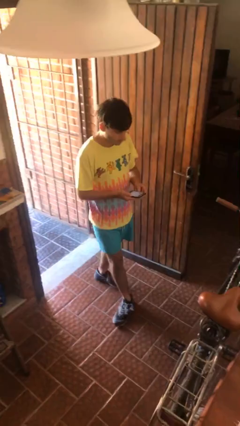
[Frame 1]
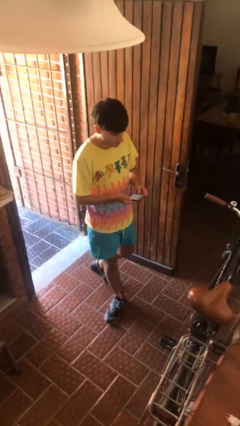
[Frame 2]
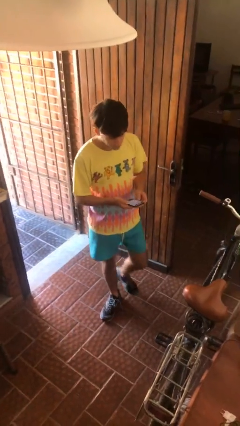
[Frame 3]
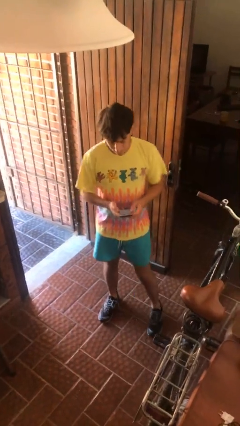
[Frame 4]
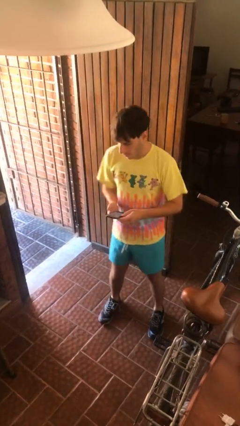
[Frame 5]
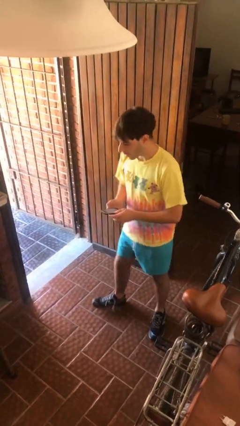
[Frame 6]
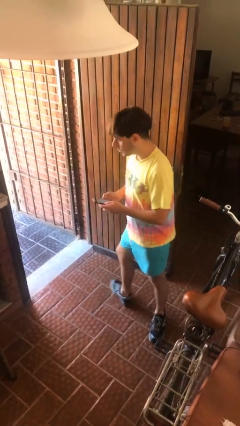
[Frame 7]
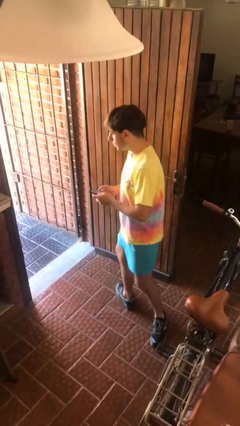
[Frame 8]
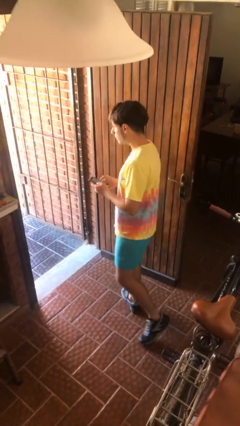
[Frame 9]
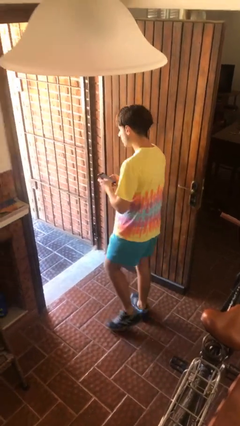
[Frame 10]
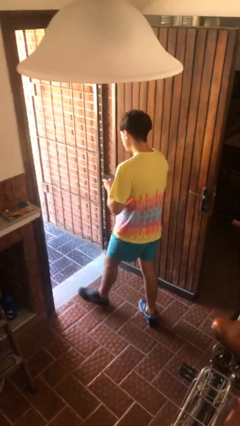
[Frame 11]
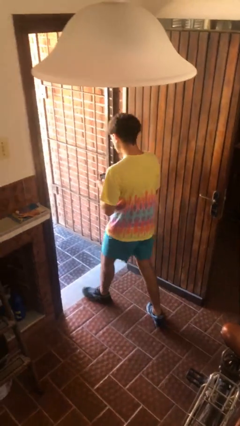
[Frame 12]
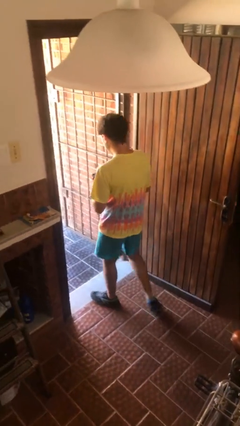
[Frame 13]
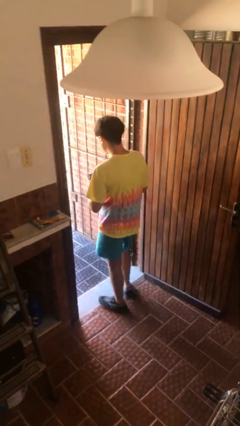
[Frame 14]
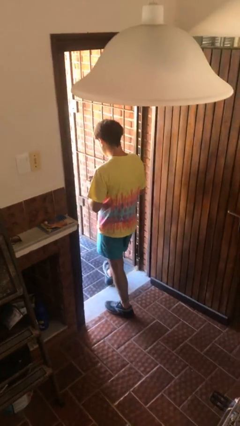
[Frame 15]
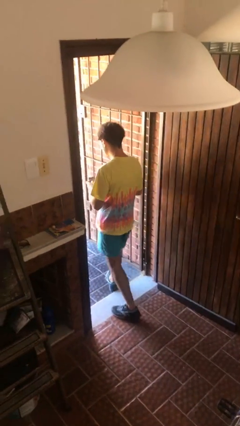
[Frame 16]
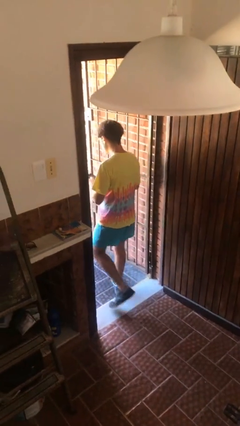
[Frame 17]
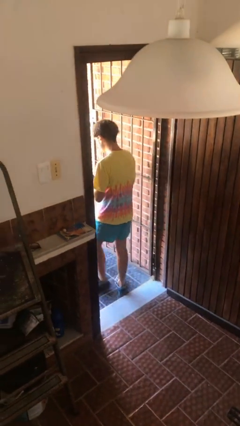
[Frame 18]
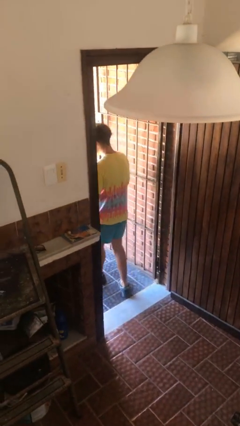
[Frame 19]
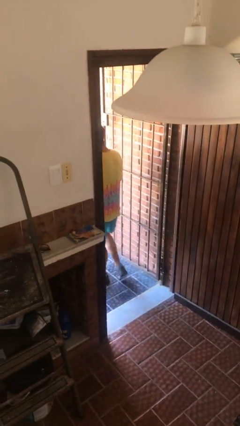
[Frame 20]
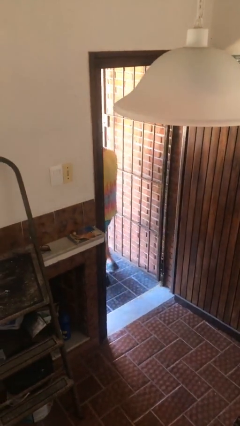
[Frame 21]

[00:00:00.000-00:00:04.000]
person exits scene through structure

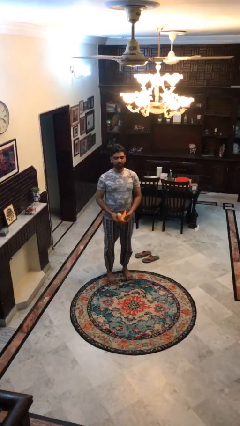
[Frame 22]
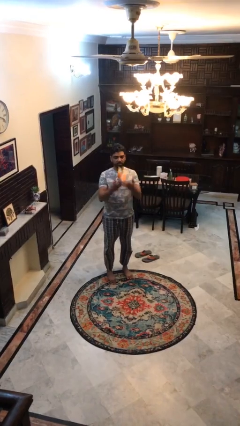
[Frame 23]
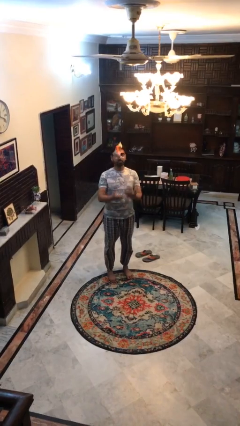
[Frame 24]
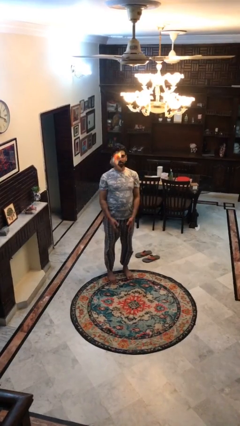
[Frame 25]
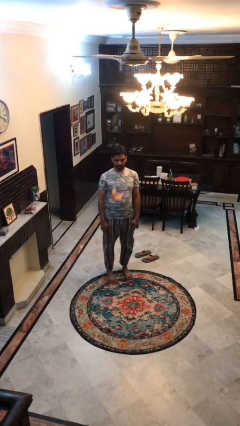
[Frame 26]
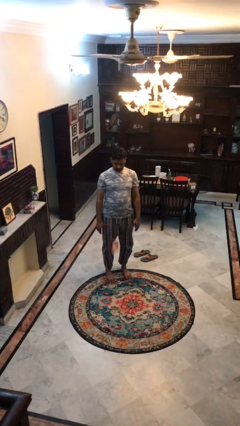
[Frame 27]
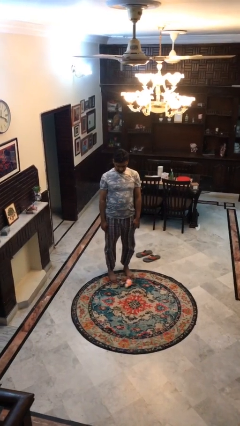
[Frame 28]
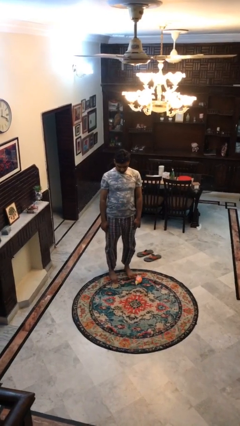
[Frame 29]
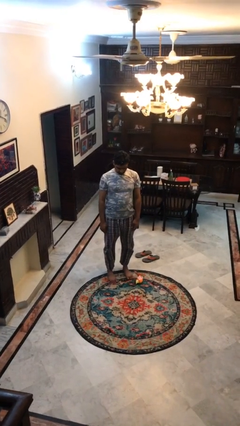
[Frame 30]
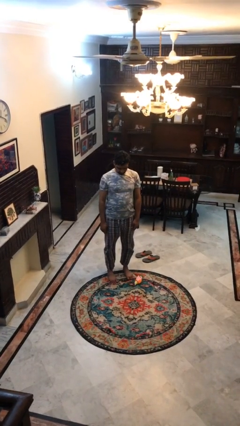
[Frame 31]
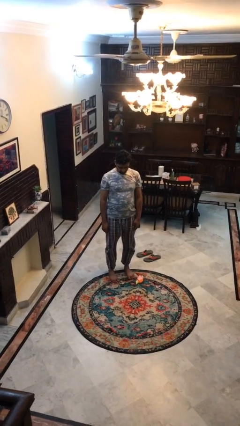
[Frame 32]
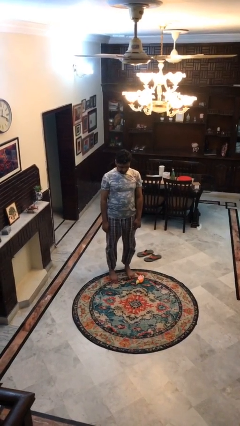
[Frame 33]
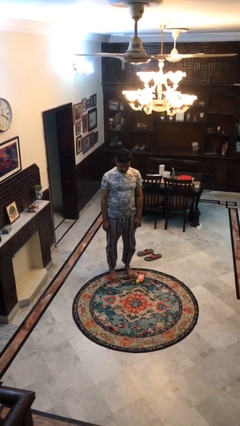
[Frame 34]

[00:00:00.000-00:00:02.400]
person throws object into air

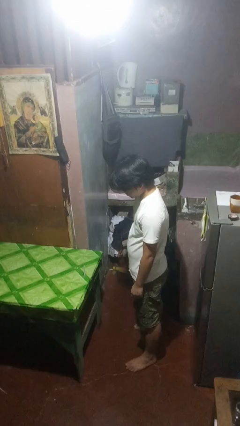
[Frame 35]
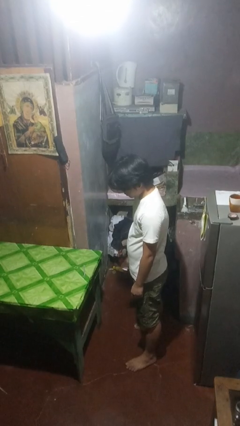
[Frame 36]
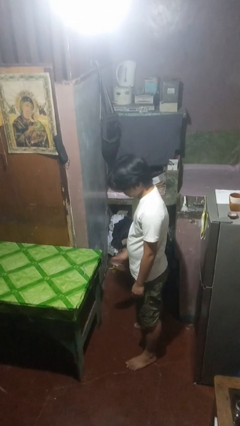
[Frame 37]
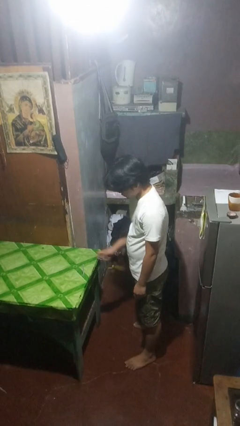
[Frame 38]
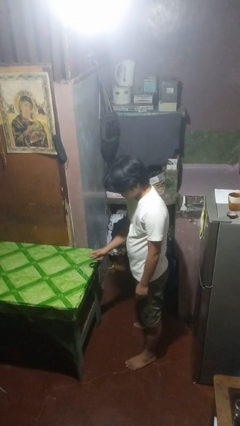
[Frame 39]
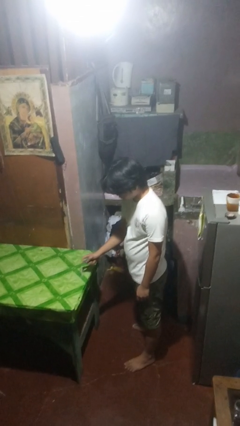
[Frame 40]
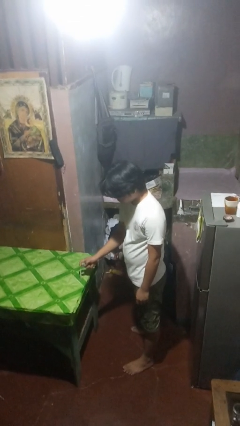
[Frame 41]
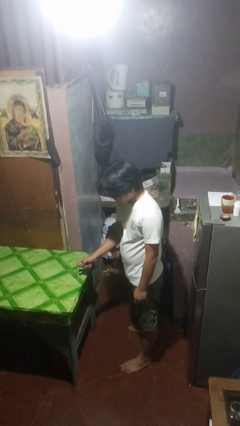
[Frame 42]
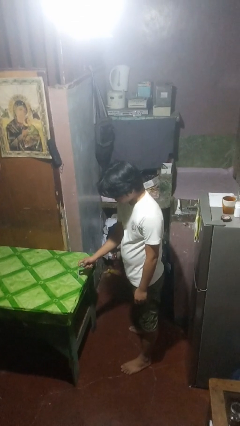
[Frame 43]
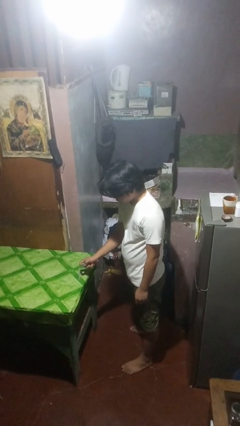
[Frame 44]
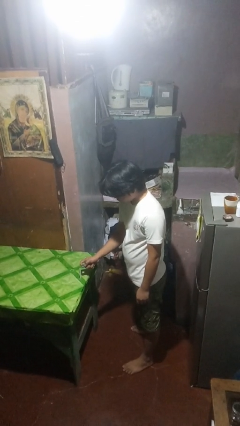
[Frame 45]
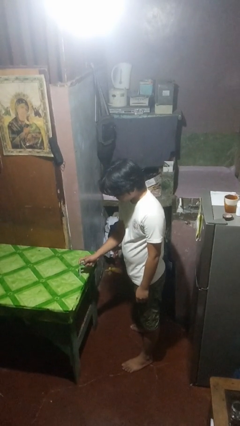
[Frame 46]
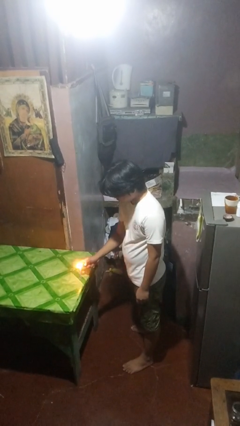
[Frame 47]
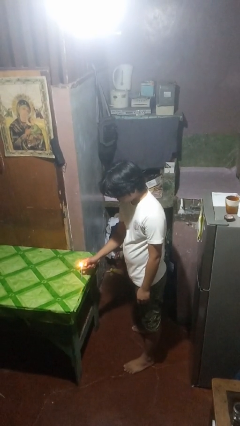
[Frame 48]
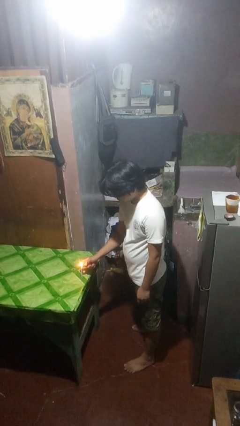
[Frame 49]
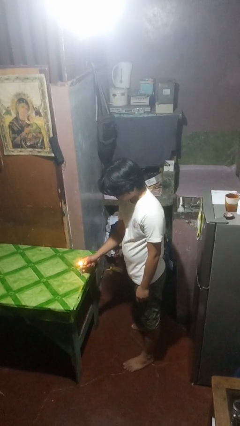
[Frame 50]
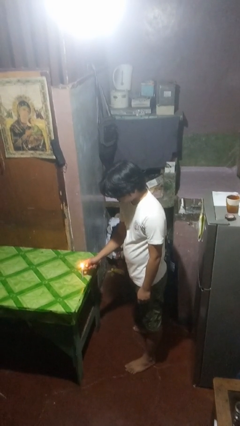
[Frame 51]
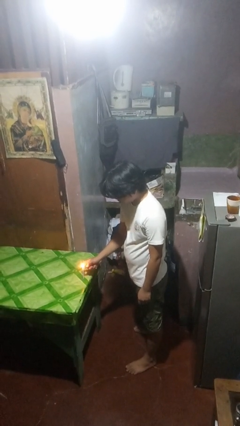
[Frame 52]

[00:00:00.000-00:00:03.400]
person lights candle

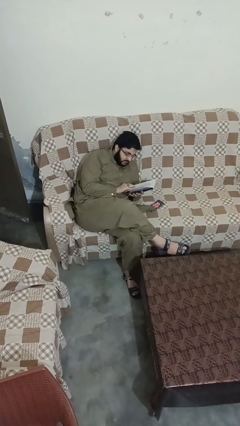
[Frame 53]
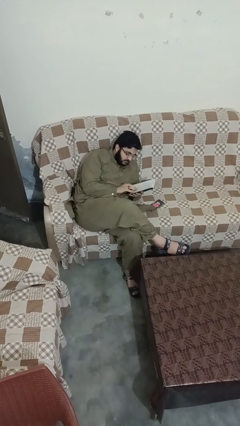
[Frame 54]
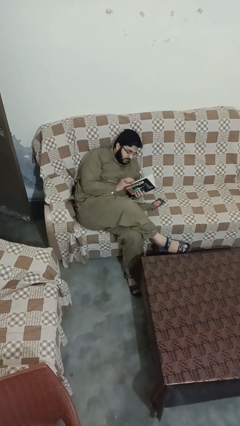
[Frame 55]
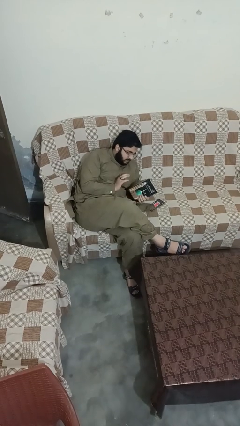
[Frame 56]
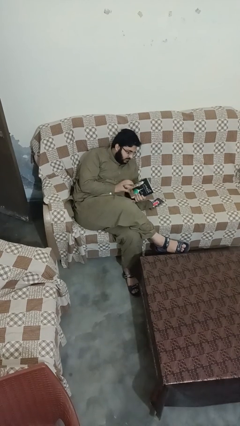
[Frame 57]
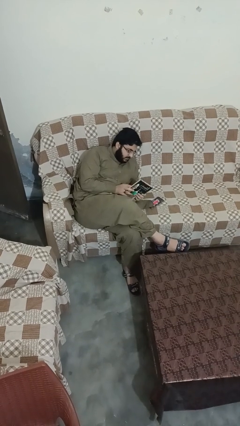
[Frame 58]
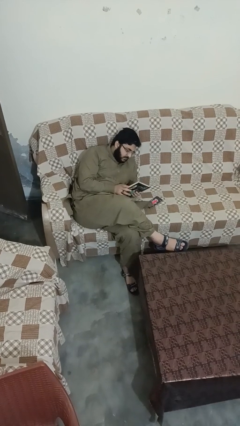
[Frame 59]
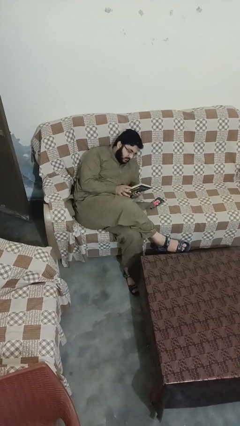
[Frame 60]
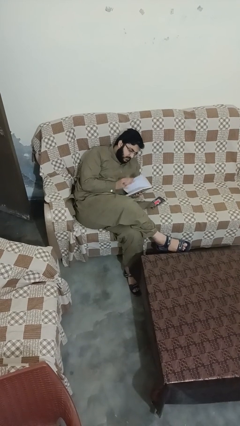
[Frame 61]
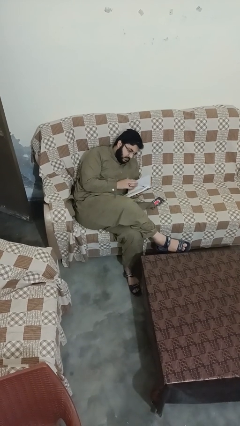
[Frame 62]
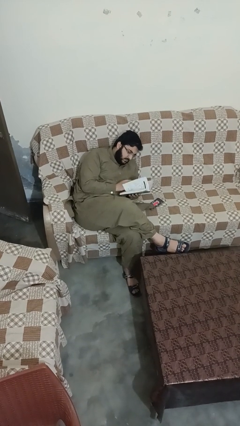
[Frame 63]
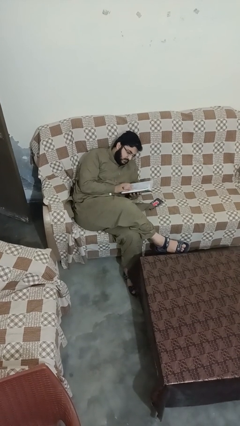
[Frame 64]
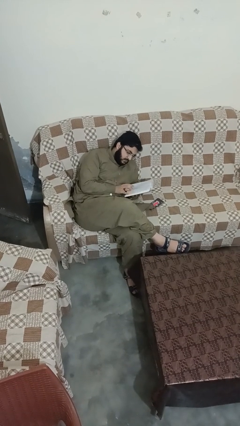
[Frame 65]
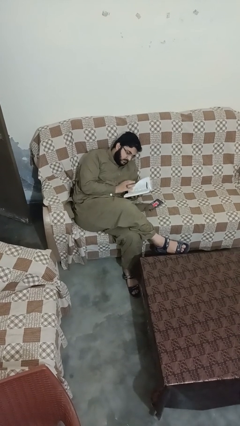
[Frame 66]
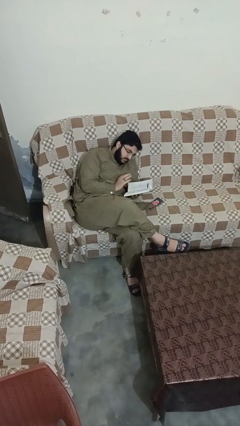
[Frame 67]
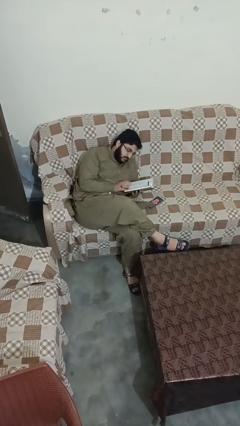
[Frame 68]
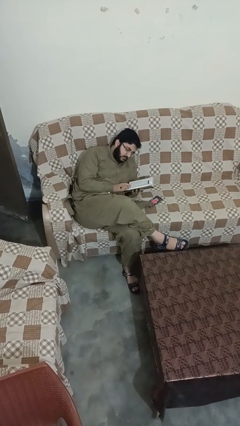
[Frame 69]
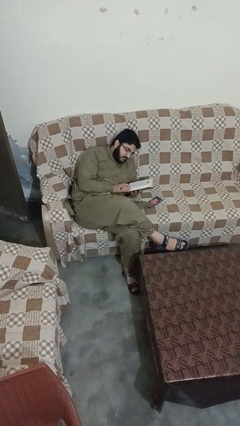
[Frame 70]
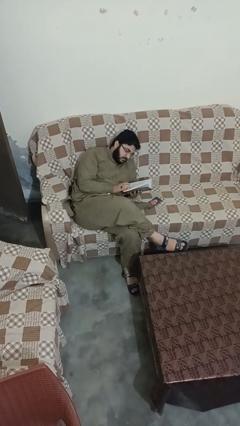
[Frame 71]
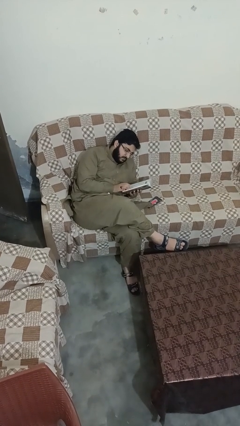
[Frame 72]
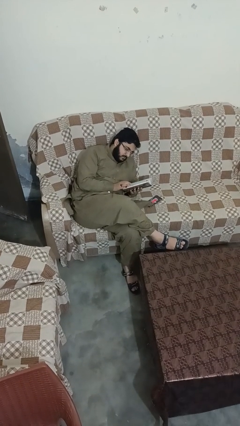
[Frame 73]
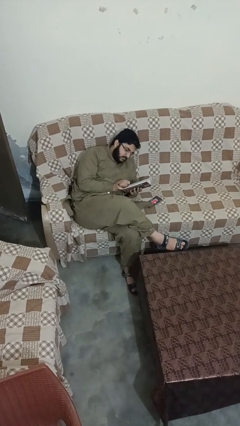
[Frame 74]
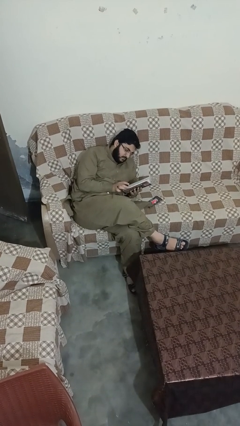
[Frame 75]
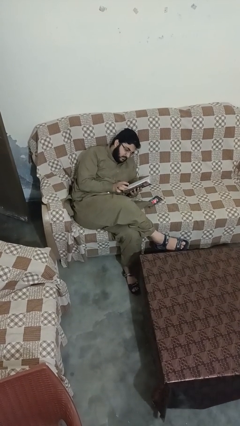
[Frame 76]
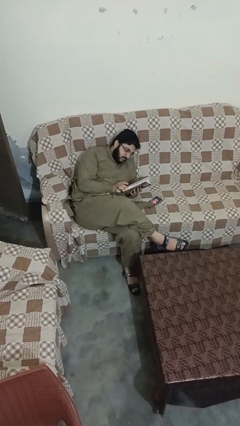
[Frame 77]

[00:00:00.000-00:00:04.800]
person reads book

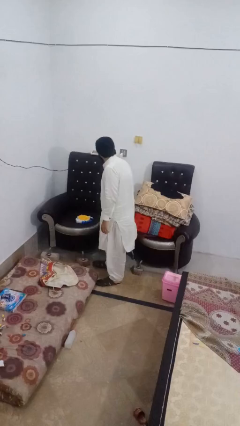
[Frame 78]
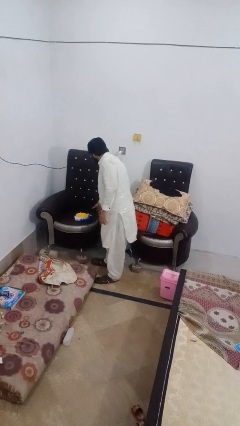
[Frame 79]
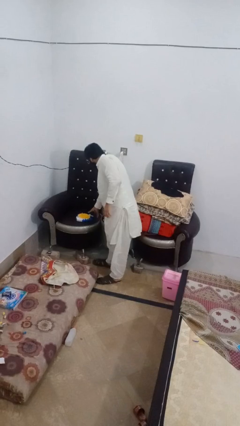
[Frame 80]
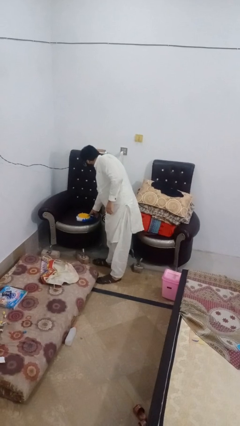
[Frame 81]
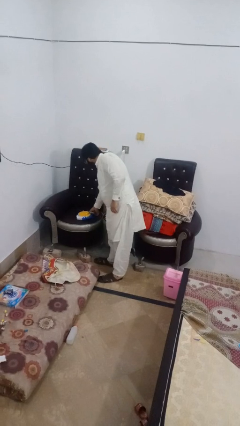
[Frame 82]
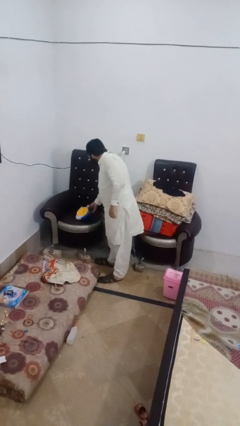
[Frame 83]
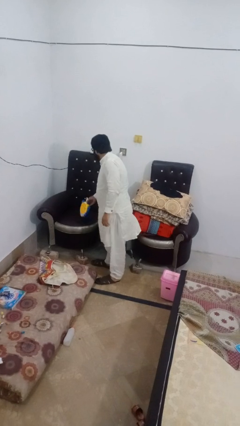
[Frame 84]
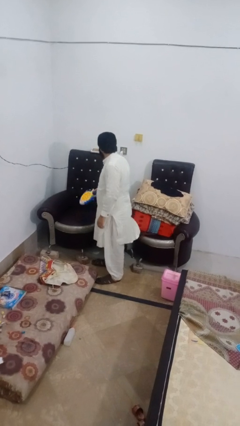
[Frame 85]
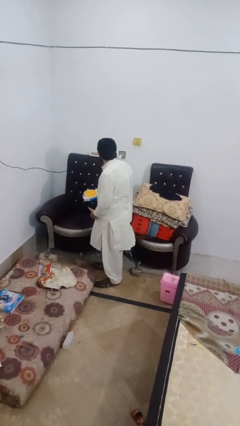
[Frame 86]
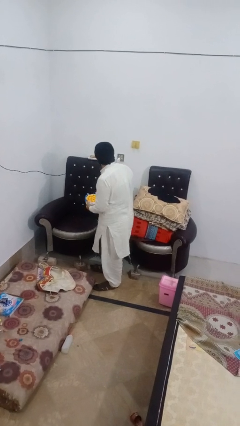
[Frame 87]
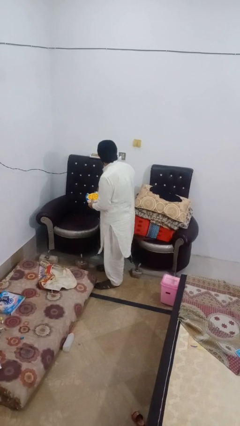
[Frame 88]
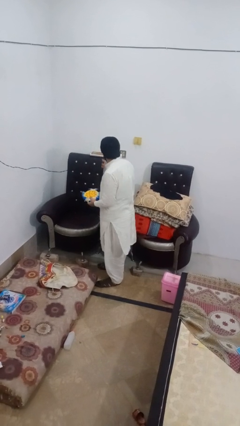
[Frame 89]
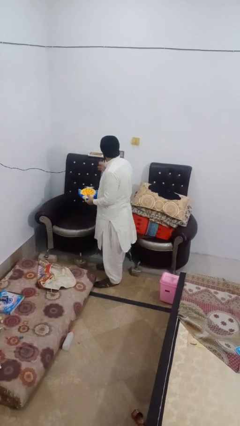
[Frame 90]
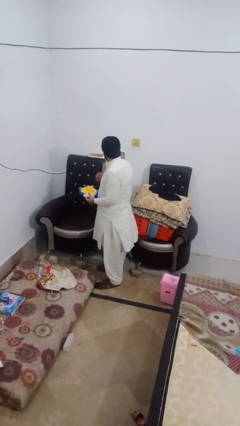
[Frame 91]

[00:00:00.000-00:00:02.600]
person picks up object from couch

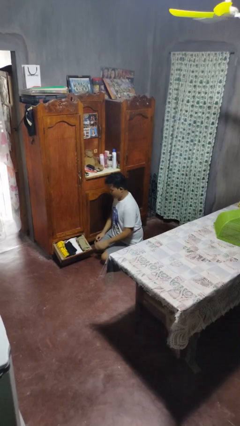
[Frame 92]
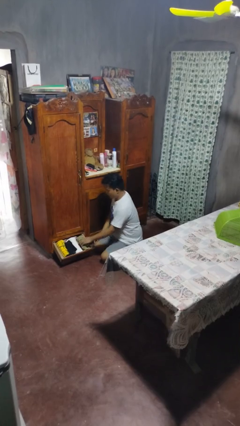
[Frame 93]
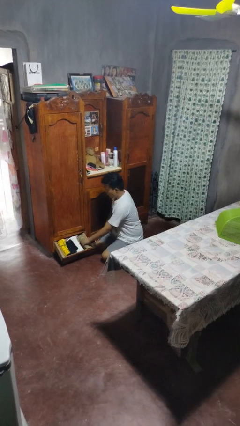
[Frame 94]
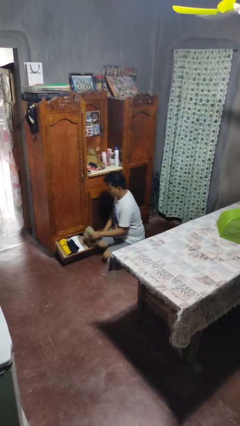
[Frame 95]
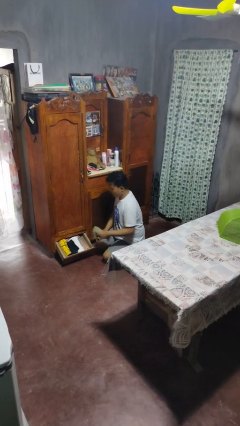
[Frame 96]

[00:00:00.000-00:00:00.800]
person takes clothes from dresser
